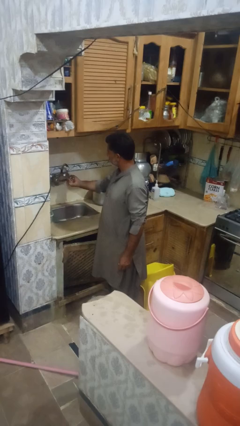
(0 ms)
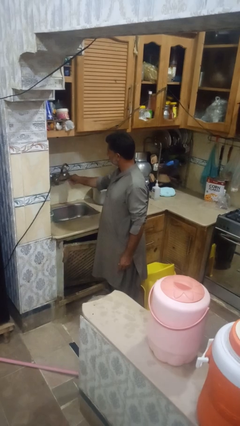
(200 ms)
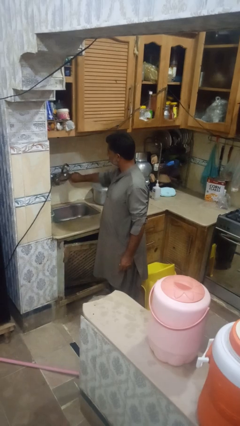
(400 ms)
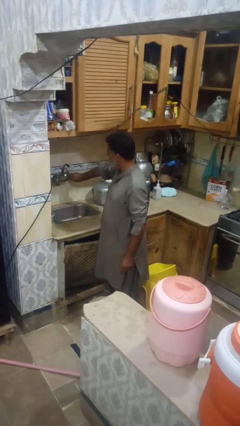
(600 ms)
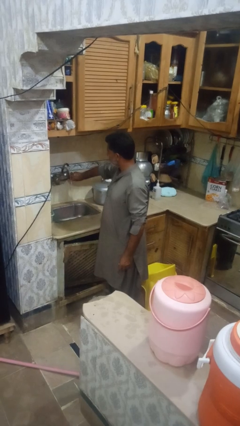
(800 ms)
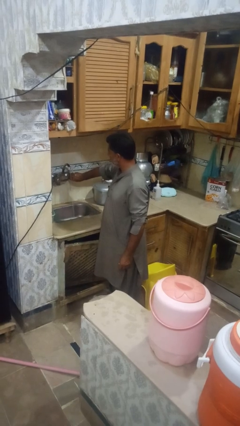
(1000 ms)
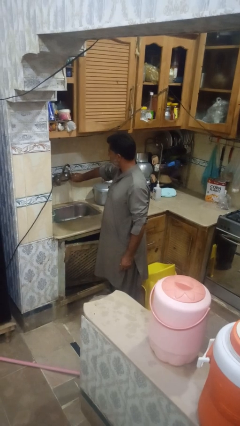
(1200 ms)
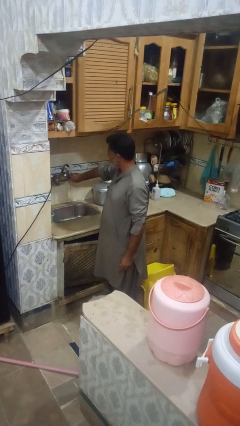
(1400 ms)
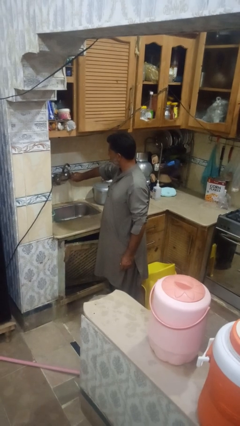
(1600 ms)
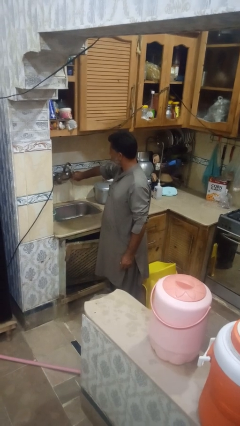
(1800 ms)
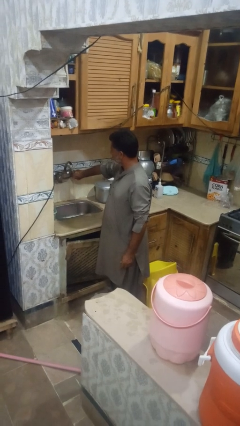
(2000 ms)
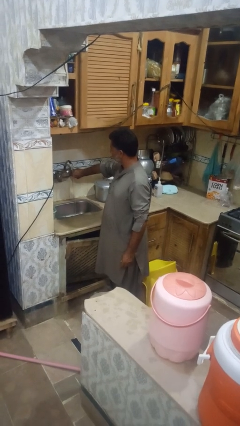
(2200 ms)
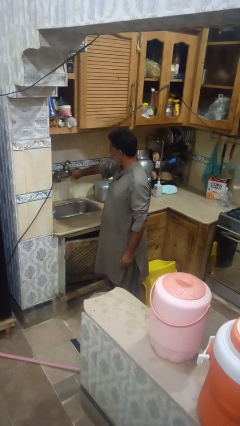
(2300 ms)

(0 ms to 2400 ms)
person turns on faucet

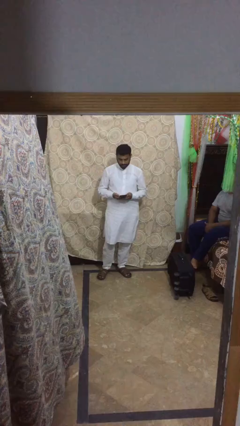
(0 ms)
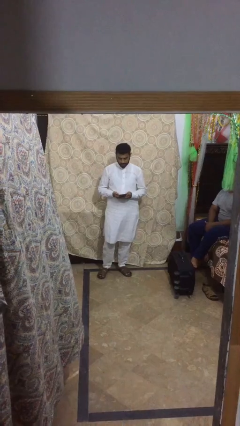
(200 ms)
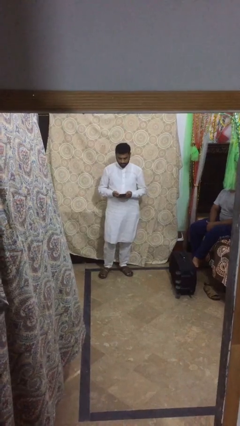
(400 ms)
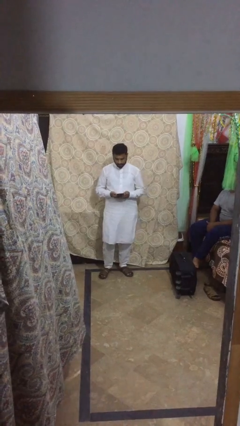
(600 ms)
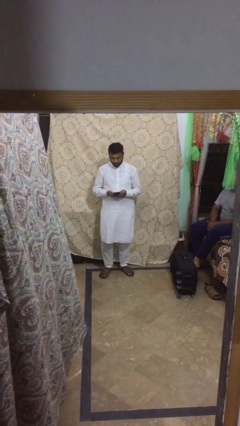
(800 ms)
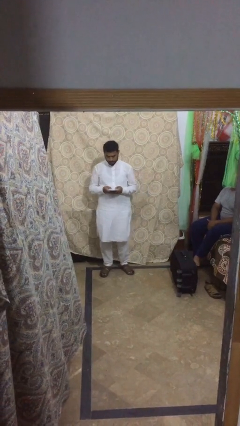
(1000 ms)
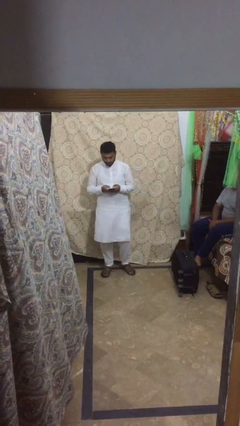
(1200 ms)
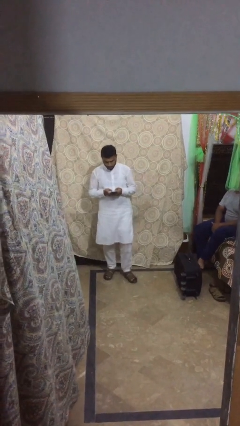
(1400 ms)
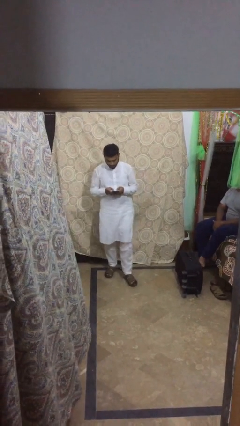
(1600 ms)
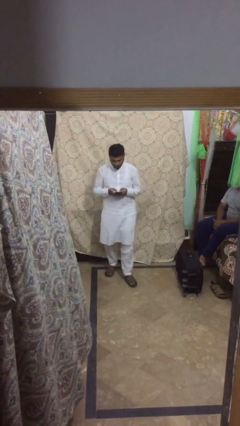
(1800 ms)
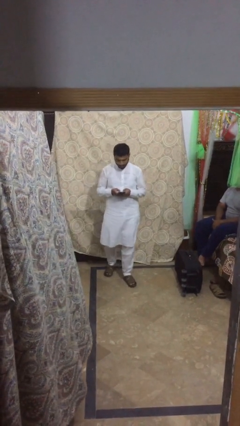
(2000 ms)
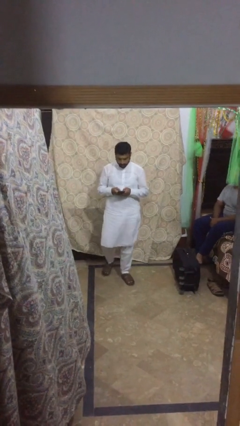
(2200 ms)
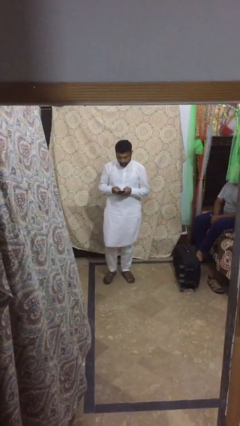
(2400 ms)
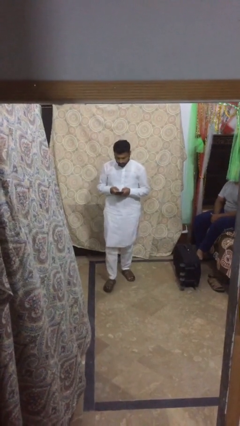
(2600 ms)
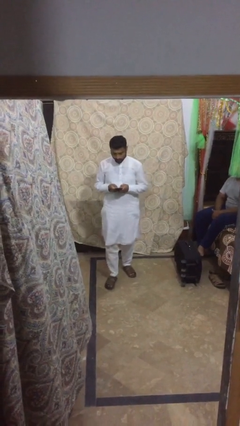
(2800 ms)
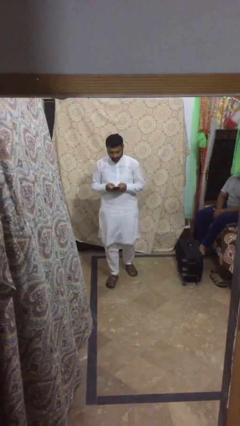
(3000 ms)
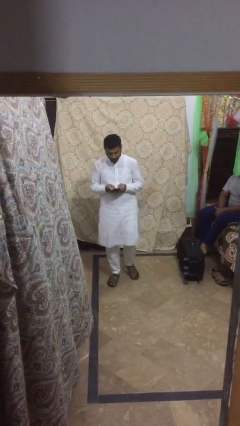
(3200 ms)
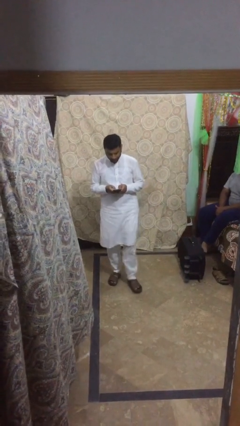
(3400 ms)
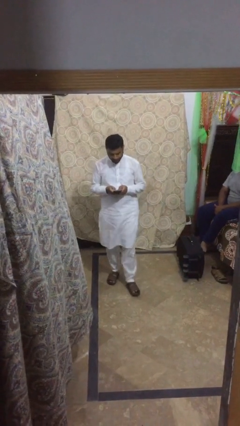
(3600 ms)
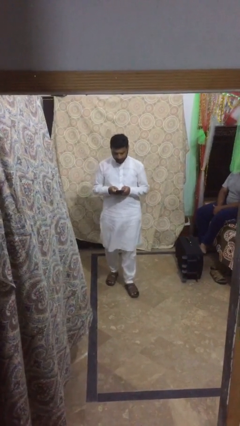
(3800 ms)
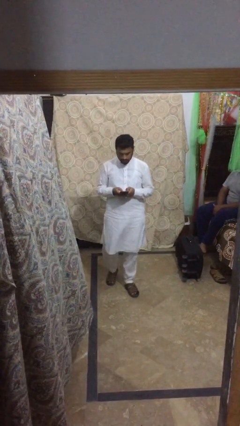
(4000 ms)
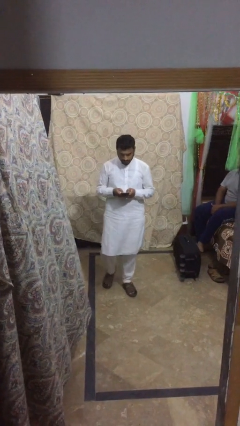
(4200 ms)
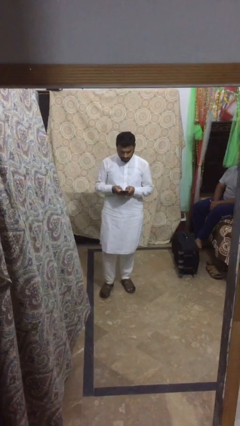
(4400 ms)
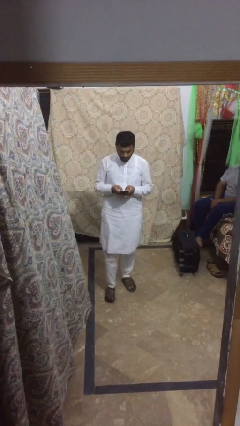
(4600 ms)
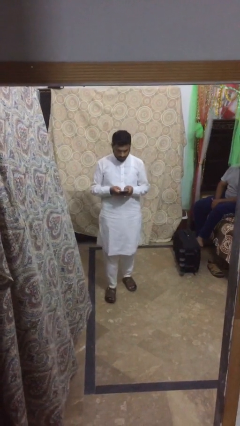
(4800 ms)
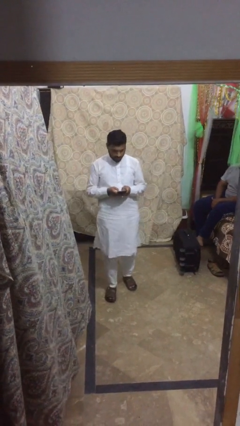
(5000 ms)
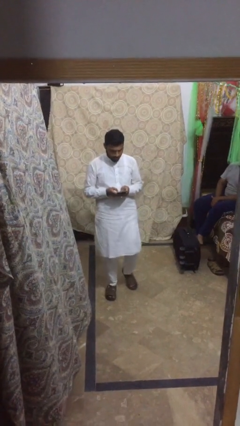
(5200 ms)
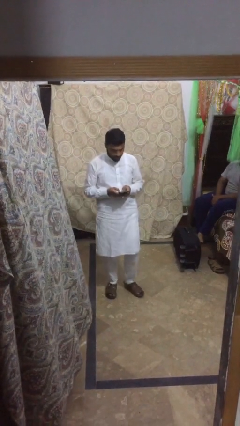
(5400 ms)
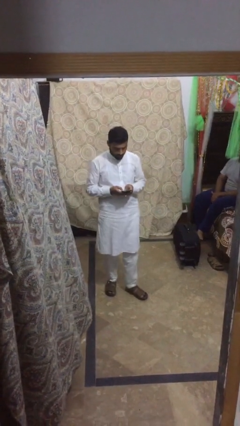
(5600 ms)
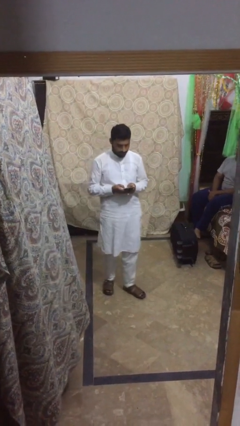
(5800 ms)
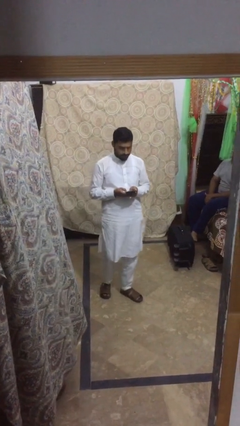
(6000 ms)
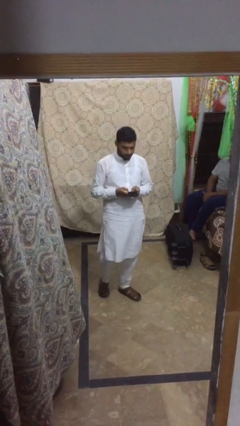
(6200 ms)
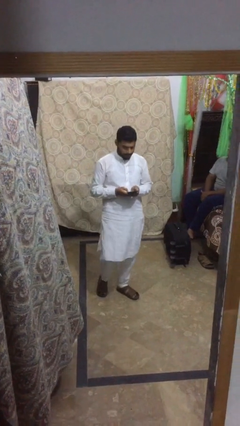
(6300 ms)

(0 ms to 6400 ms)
person texts on phone

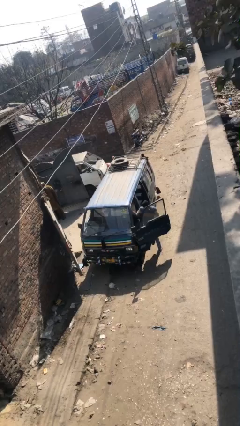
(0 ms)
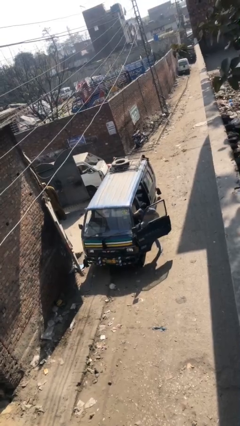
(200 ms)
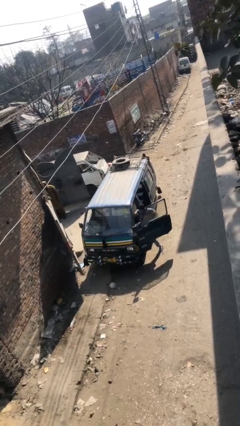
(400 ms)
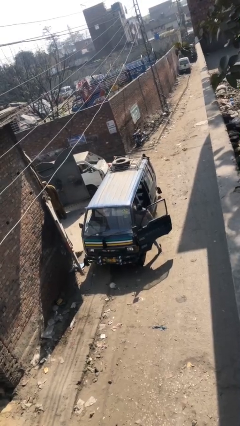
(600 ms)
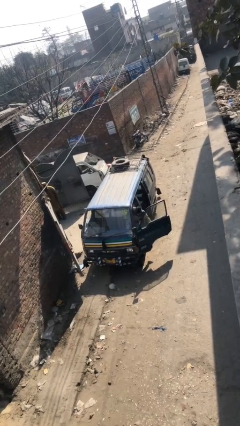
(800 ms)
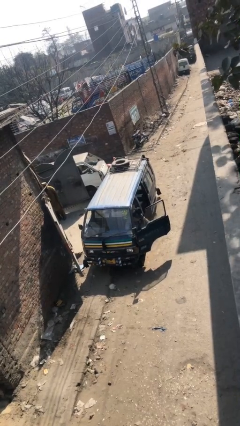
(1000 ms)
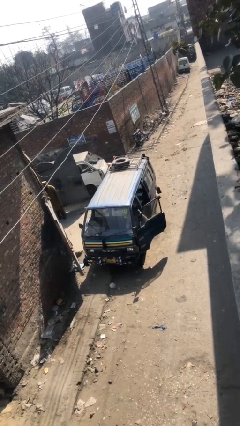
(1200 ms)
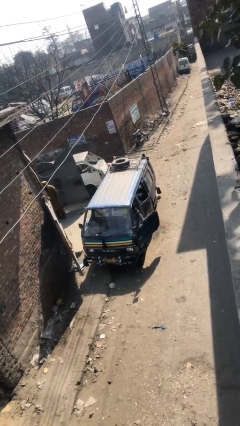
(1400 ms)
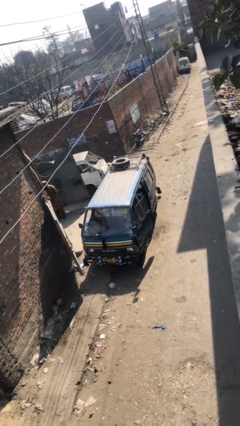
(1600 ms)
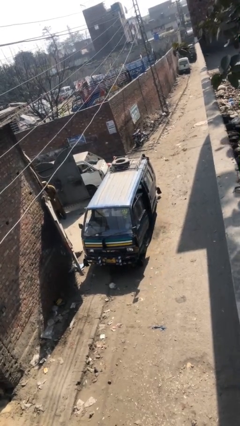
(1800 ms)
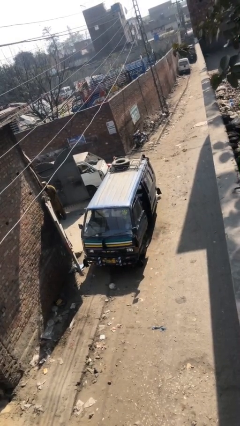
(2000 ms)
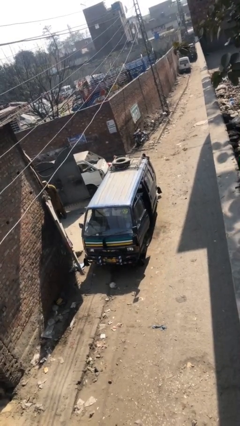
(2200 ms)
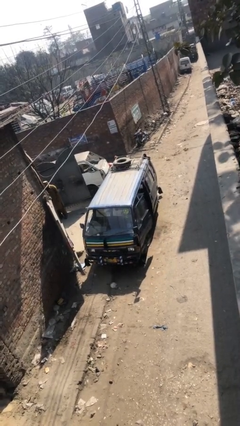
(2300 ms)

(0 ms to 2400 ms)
car picks up person

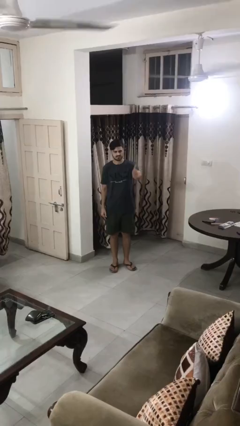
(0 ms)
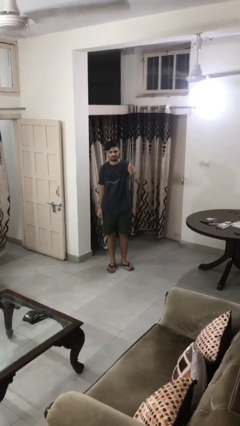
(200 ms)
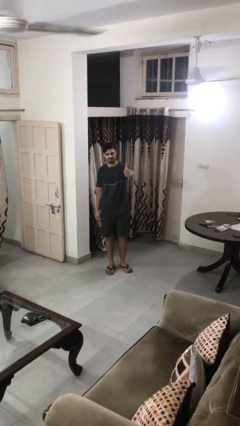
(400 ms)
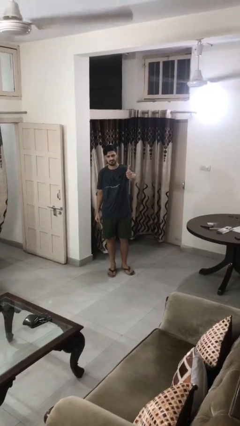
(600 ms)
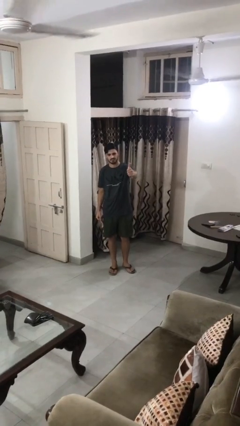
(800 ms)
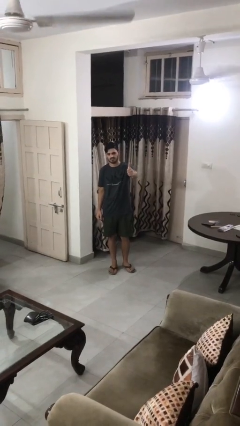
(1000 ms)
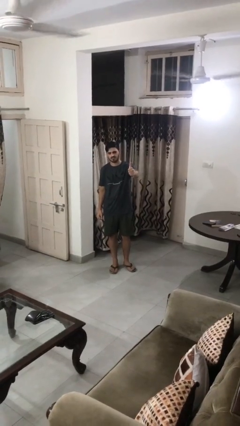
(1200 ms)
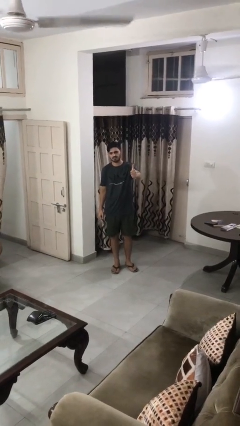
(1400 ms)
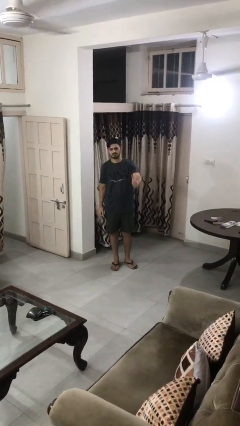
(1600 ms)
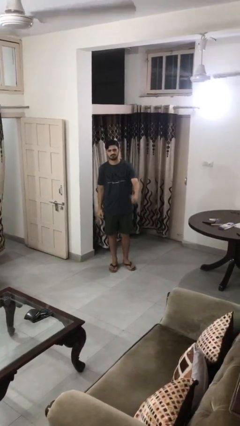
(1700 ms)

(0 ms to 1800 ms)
person gestures thumbs up

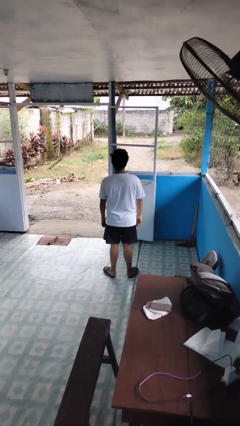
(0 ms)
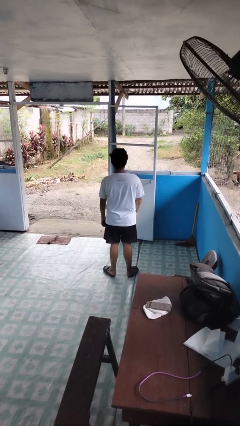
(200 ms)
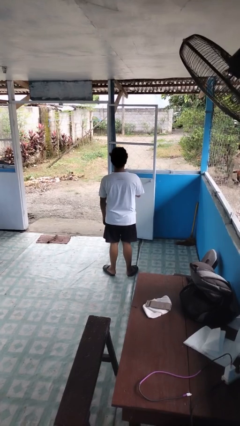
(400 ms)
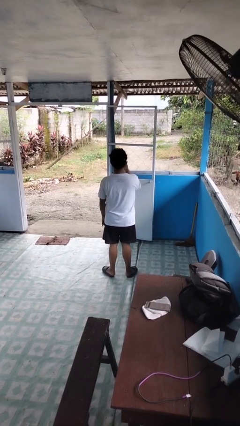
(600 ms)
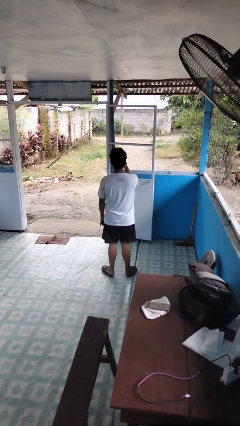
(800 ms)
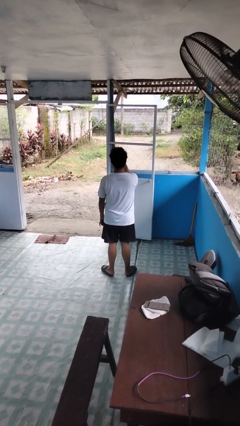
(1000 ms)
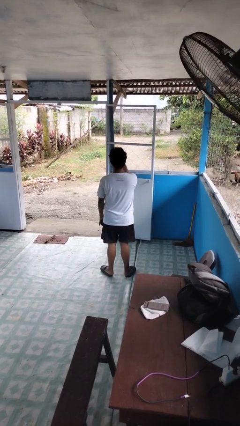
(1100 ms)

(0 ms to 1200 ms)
person gestures call me

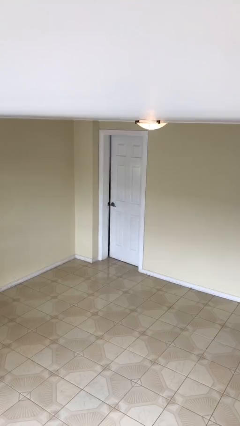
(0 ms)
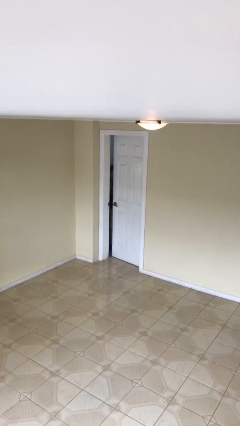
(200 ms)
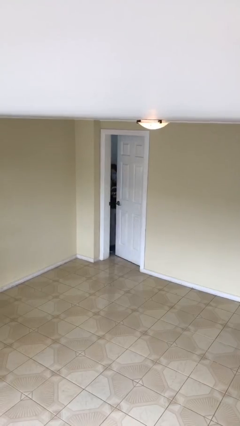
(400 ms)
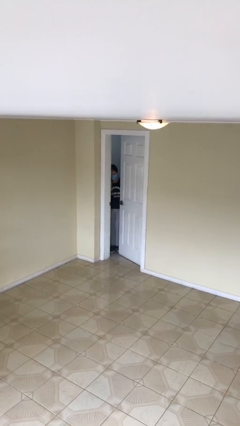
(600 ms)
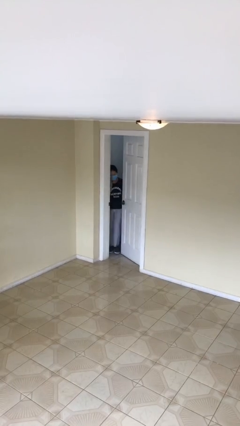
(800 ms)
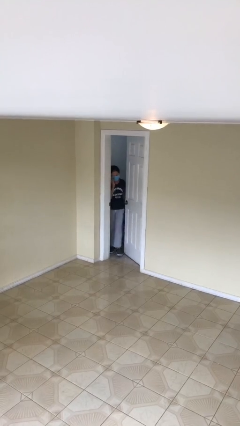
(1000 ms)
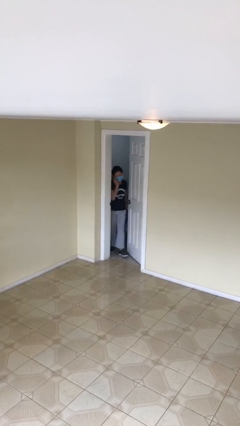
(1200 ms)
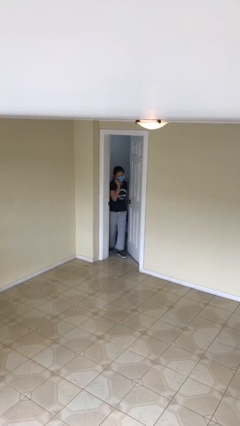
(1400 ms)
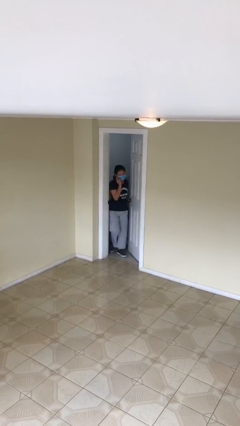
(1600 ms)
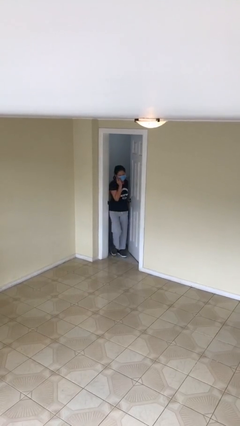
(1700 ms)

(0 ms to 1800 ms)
person opens facility door

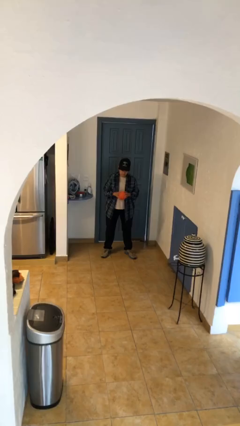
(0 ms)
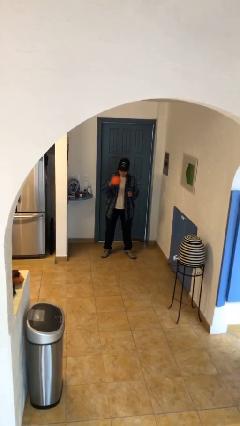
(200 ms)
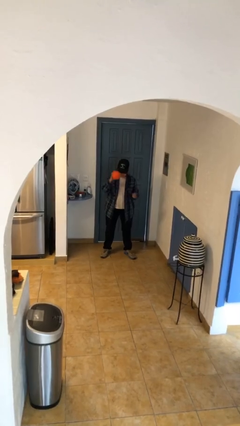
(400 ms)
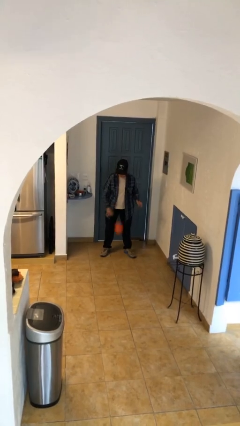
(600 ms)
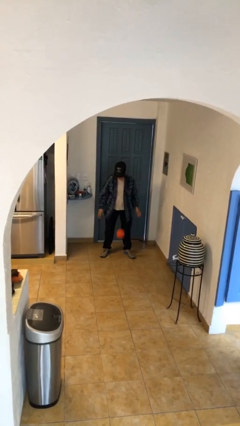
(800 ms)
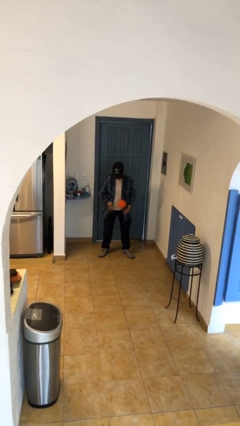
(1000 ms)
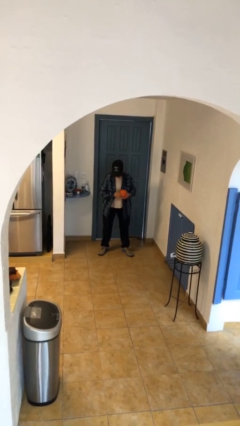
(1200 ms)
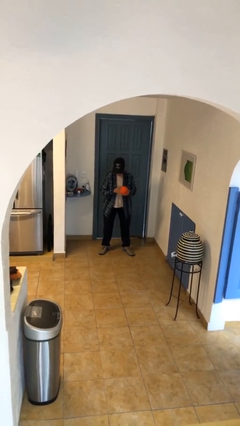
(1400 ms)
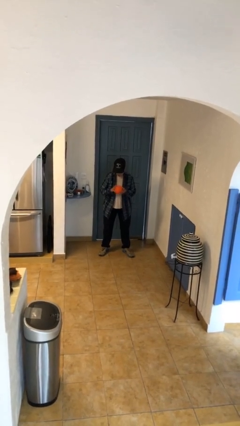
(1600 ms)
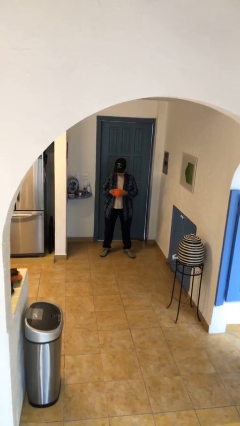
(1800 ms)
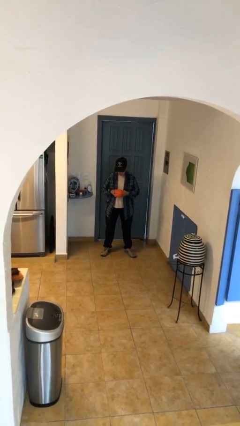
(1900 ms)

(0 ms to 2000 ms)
person bounces ball on floor
